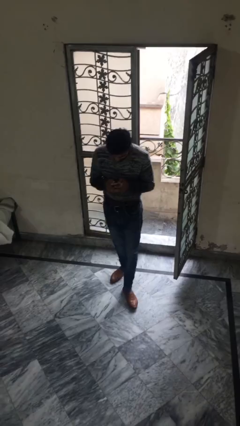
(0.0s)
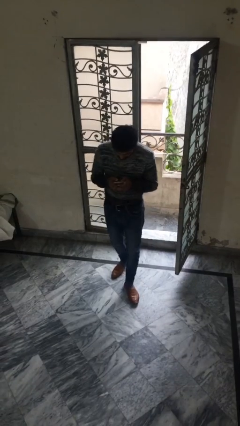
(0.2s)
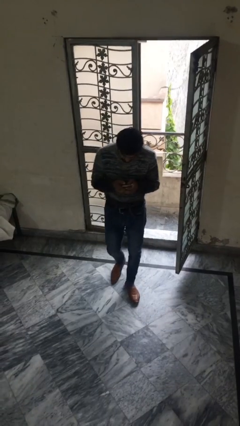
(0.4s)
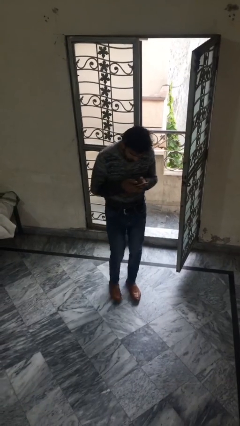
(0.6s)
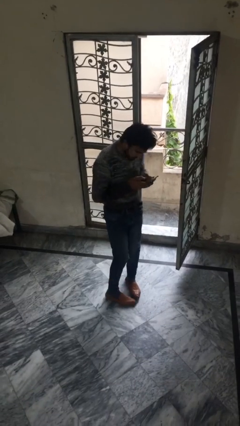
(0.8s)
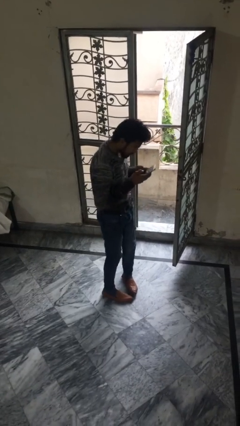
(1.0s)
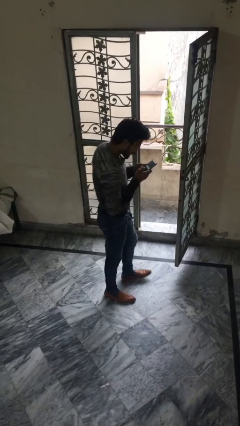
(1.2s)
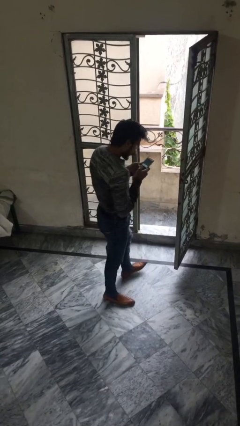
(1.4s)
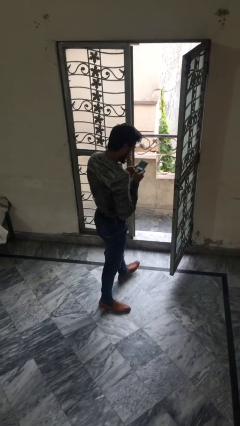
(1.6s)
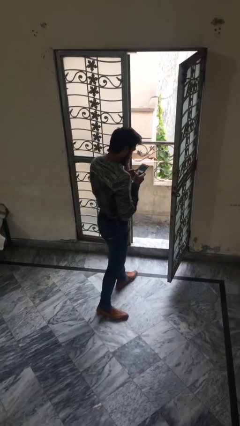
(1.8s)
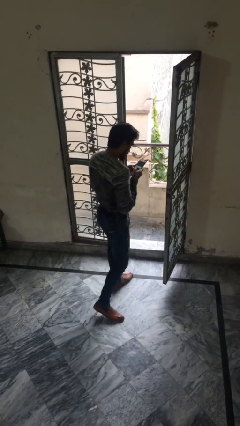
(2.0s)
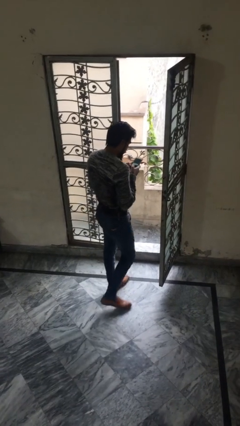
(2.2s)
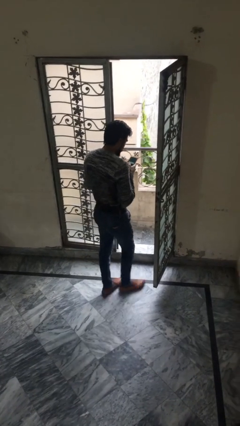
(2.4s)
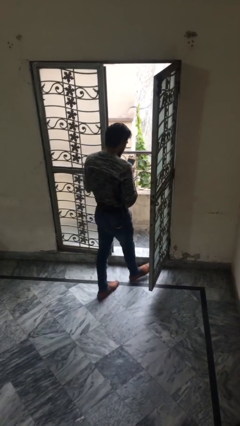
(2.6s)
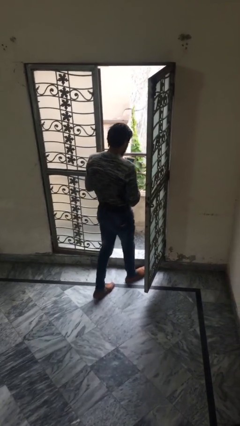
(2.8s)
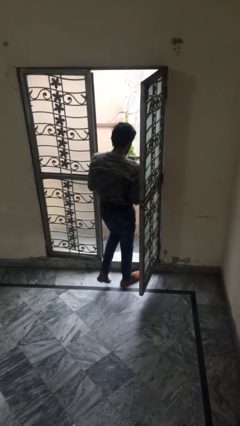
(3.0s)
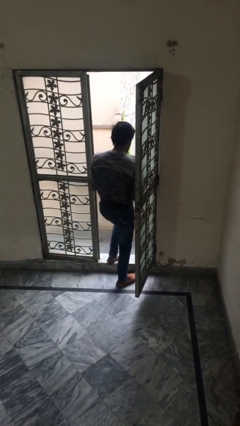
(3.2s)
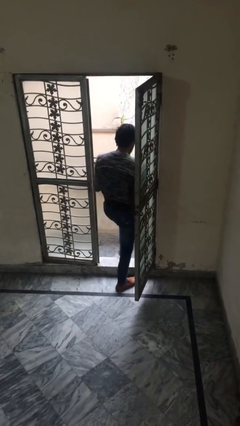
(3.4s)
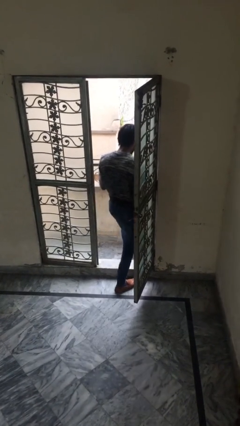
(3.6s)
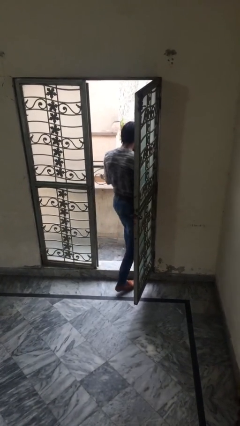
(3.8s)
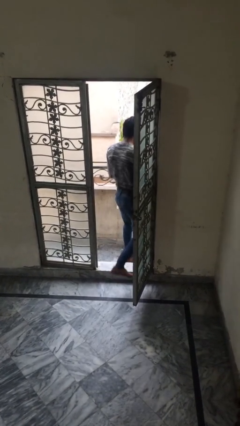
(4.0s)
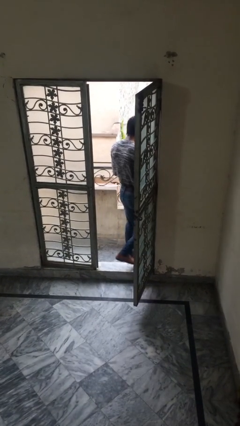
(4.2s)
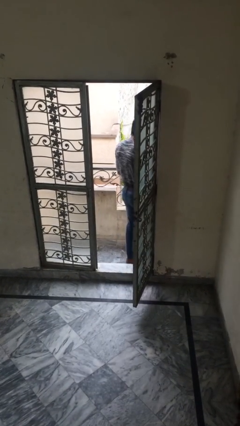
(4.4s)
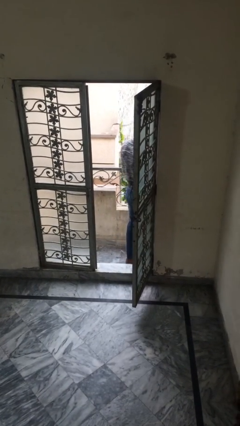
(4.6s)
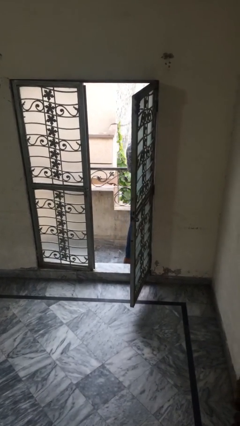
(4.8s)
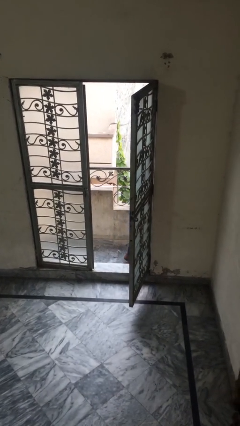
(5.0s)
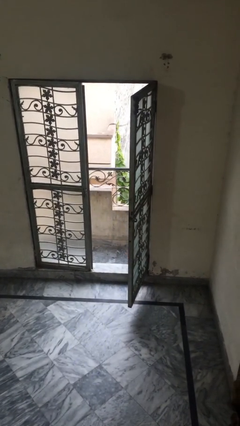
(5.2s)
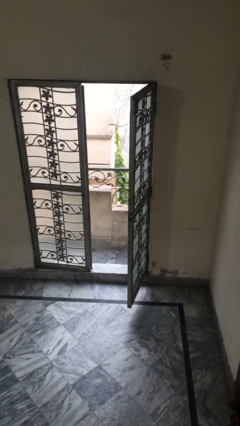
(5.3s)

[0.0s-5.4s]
person exits scene through structure

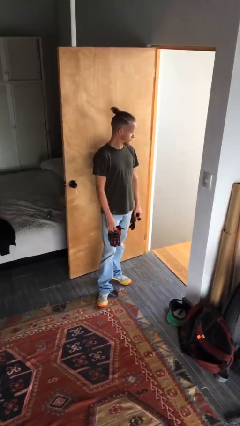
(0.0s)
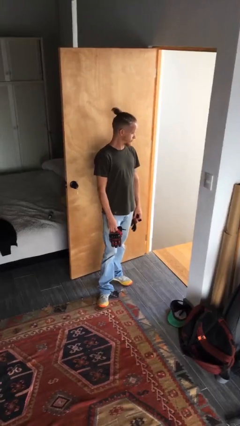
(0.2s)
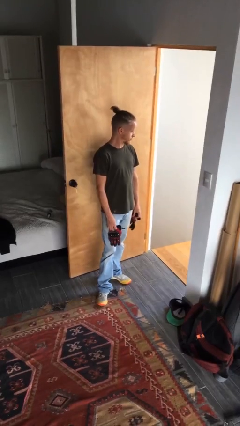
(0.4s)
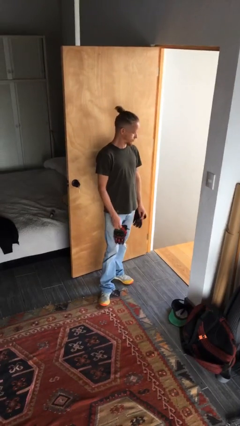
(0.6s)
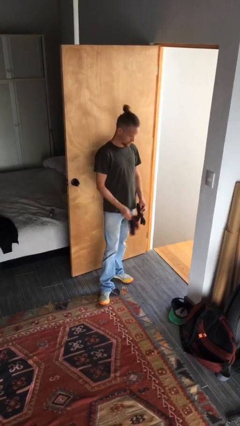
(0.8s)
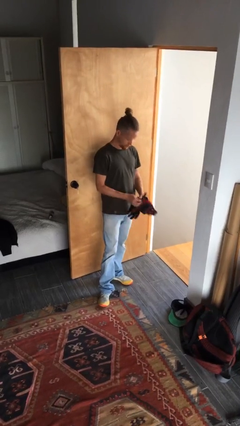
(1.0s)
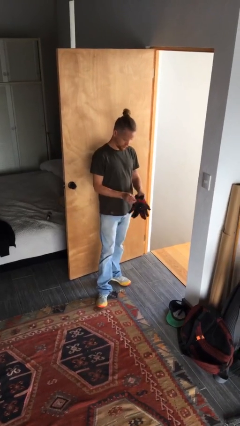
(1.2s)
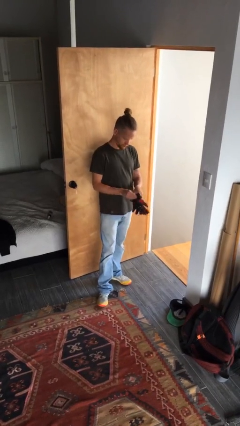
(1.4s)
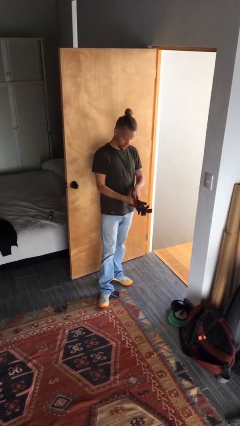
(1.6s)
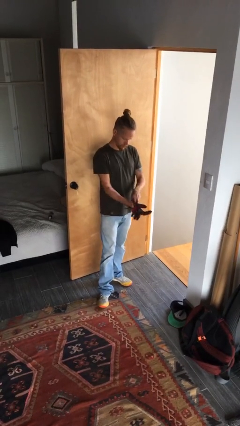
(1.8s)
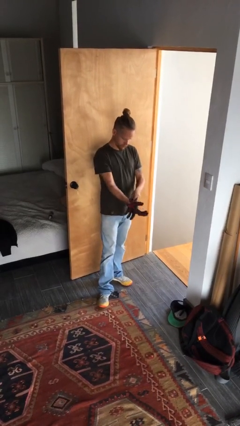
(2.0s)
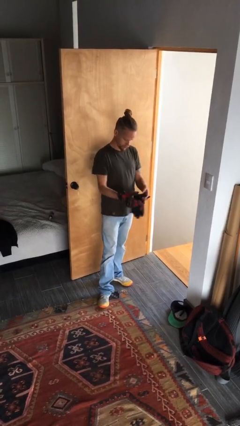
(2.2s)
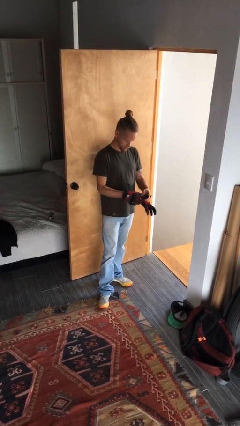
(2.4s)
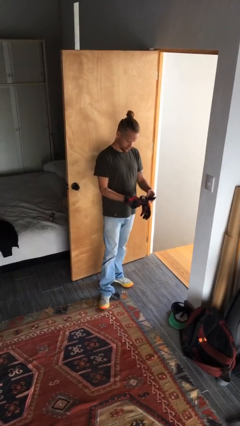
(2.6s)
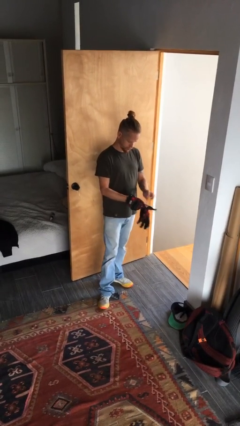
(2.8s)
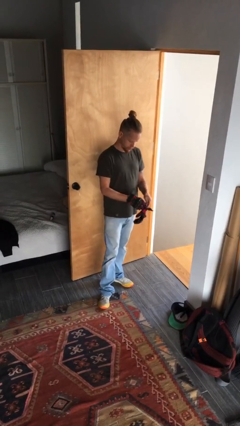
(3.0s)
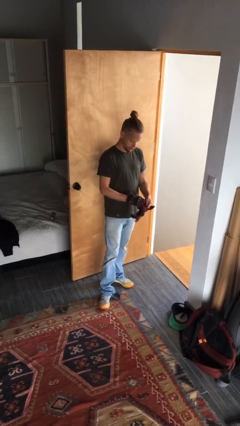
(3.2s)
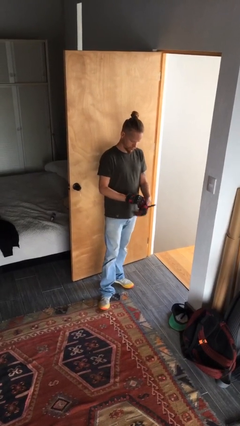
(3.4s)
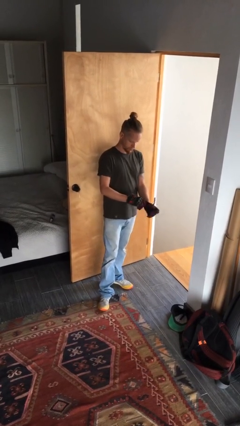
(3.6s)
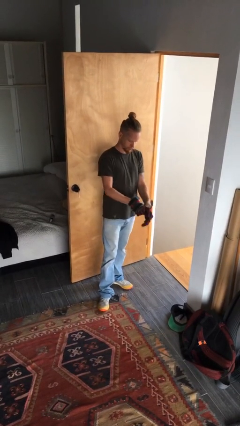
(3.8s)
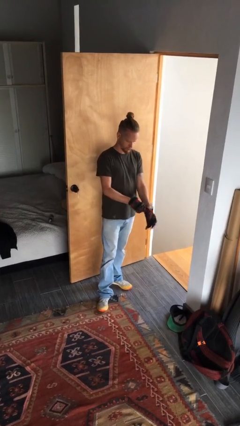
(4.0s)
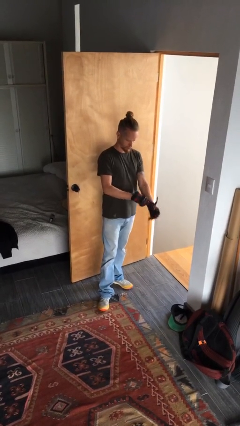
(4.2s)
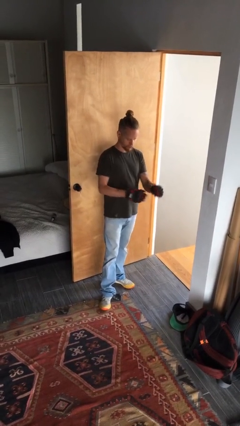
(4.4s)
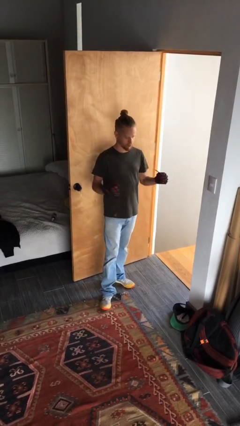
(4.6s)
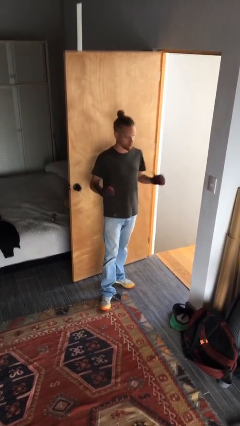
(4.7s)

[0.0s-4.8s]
person puts on gloves

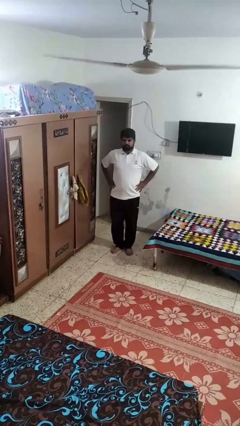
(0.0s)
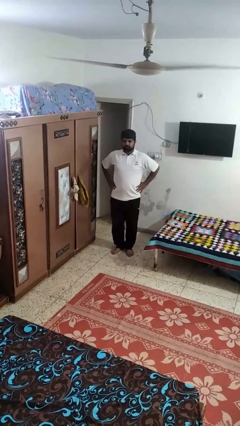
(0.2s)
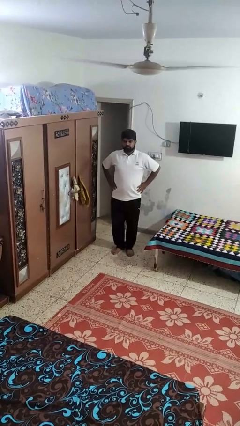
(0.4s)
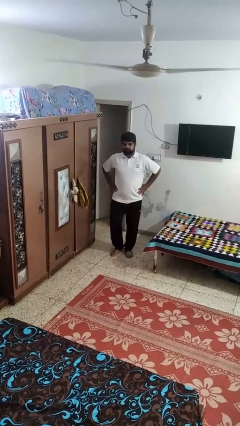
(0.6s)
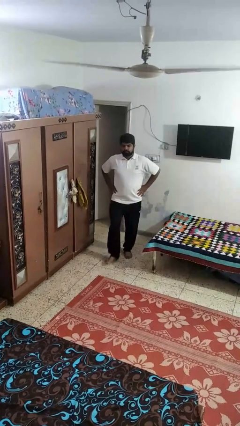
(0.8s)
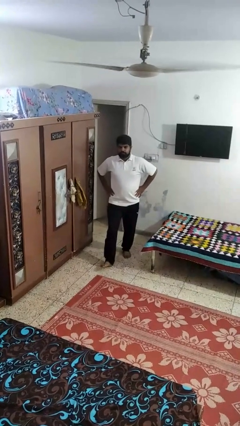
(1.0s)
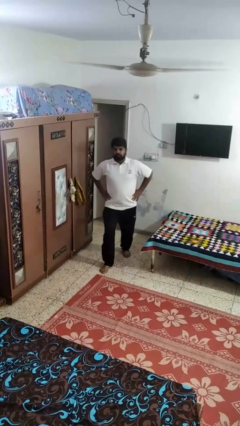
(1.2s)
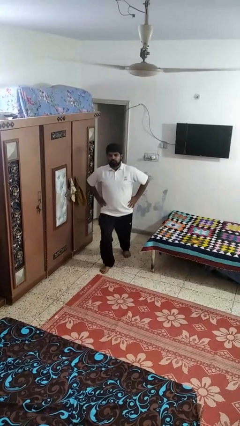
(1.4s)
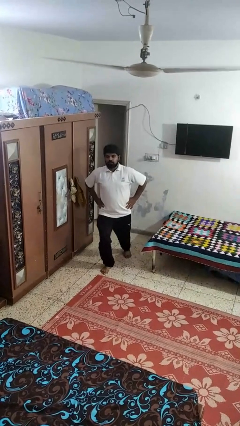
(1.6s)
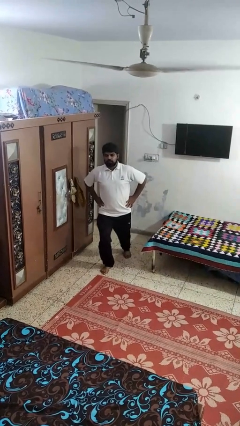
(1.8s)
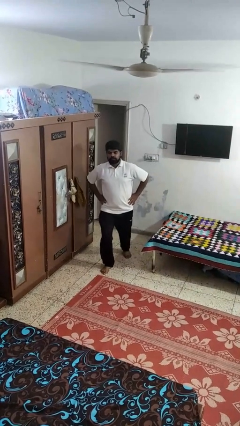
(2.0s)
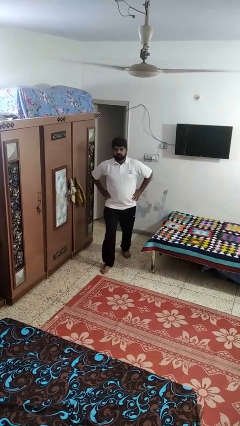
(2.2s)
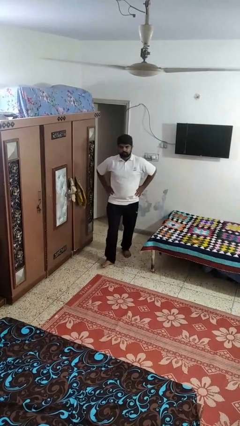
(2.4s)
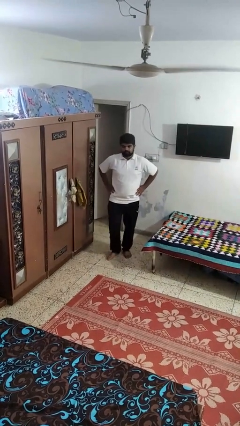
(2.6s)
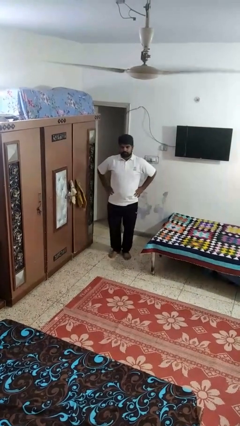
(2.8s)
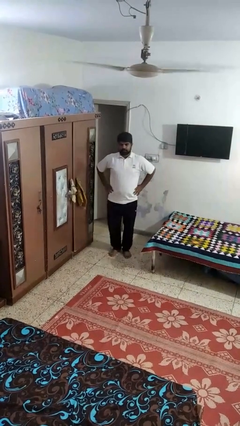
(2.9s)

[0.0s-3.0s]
person exercises with lunges

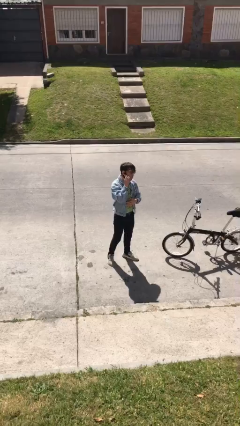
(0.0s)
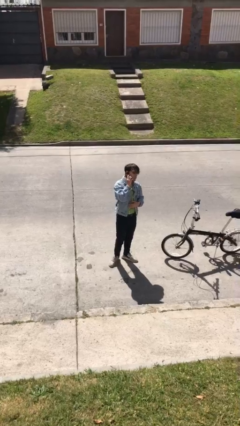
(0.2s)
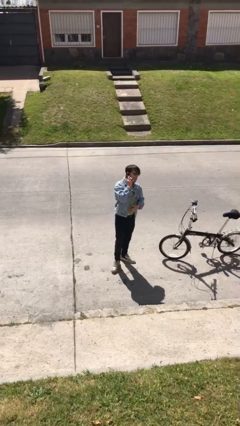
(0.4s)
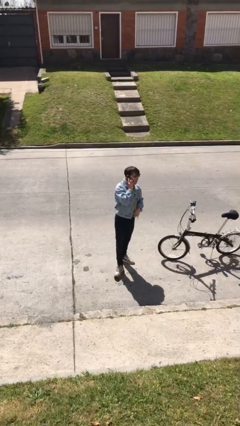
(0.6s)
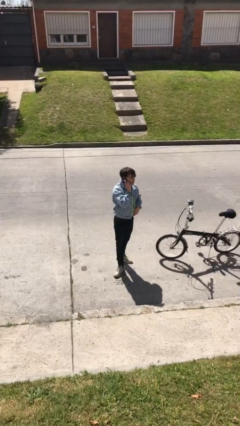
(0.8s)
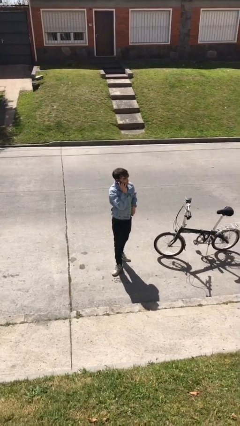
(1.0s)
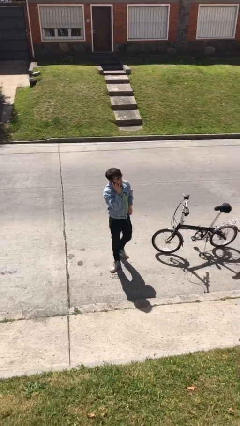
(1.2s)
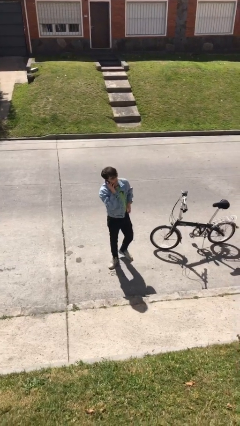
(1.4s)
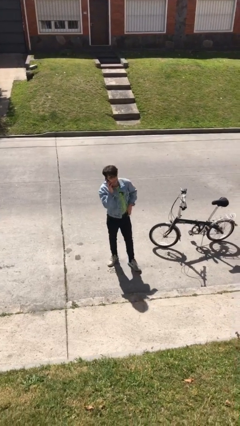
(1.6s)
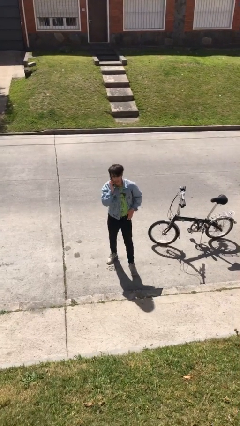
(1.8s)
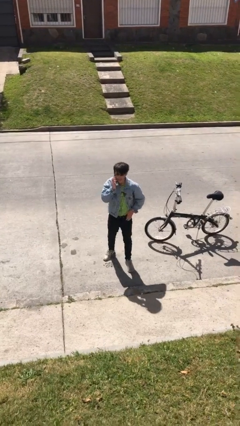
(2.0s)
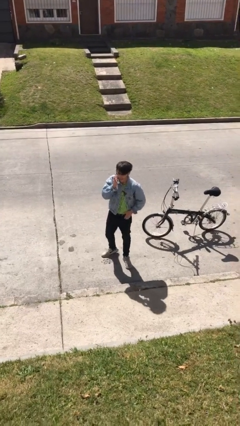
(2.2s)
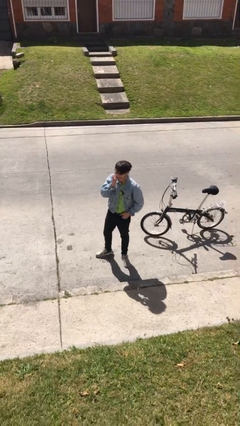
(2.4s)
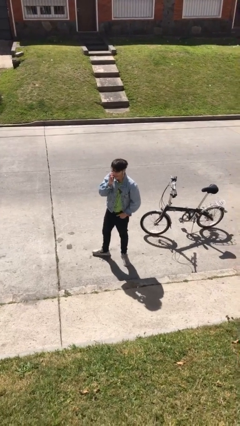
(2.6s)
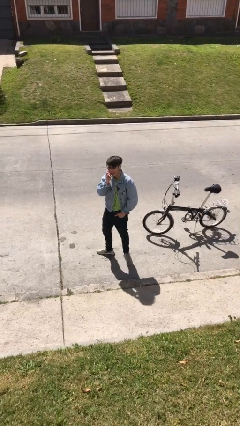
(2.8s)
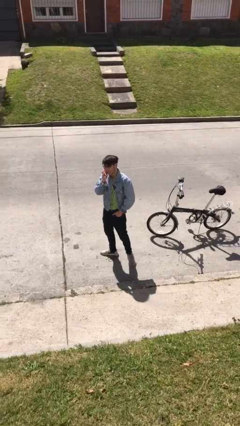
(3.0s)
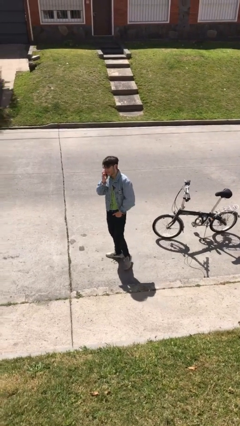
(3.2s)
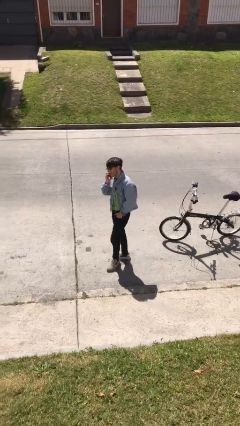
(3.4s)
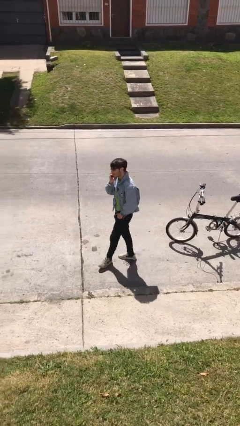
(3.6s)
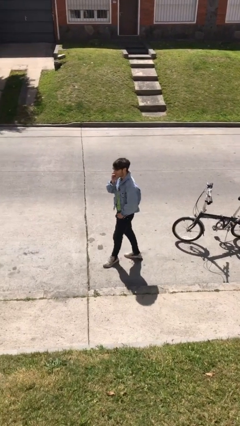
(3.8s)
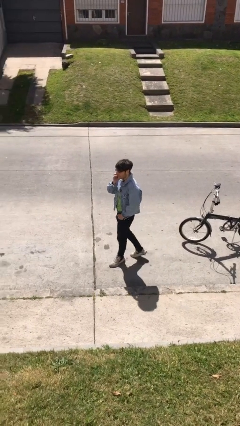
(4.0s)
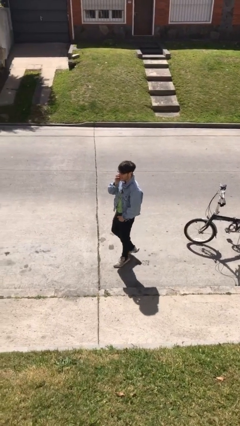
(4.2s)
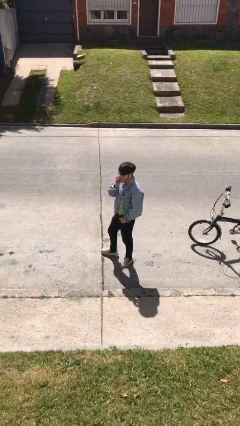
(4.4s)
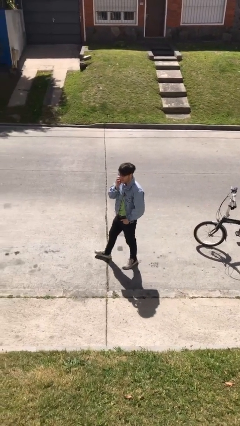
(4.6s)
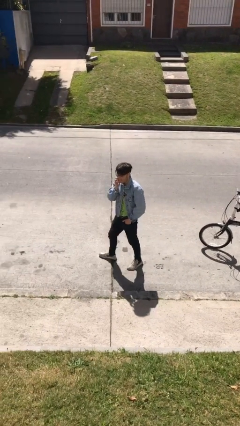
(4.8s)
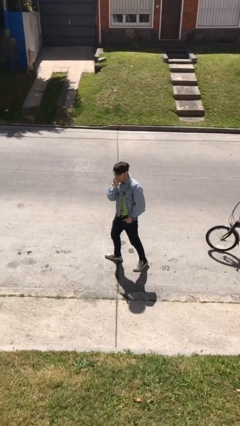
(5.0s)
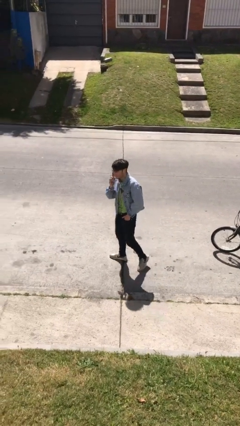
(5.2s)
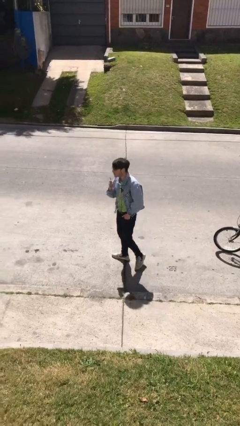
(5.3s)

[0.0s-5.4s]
person talks on phone
